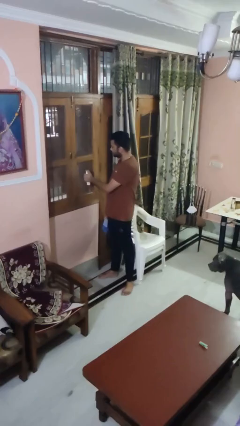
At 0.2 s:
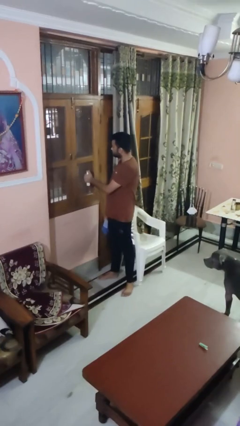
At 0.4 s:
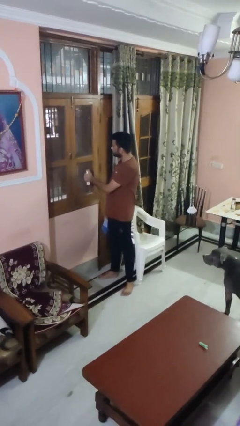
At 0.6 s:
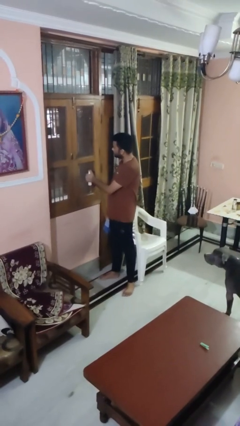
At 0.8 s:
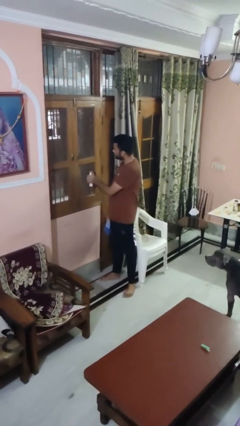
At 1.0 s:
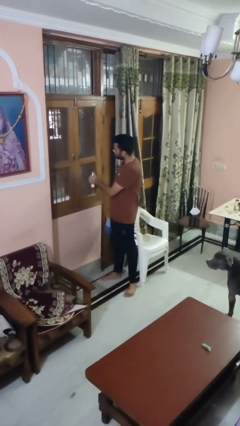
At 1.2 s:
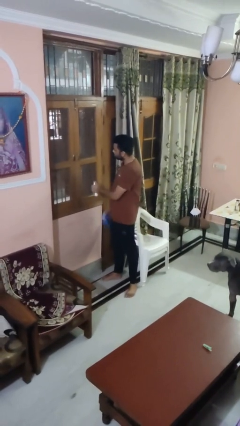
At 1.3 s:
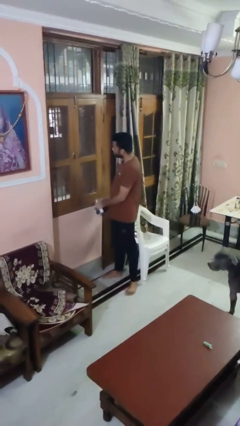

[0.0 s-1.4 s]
person sprays from bottle

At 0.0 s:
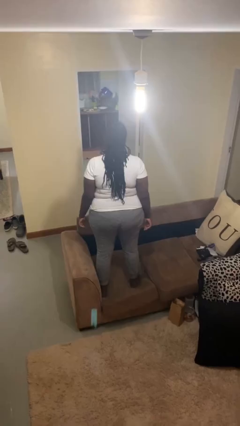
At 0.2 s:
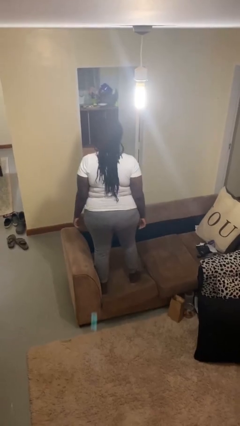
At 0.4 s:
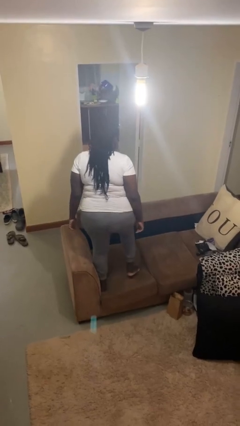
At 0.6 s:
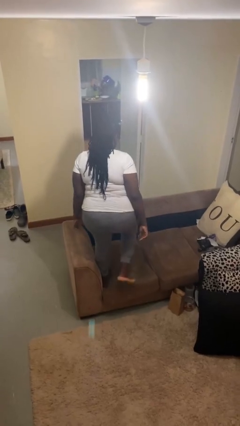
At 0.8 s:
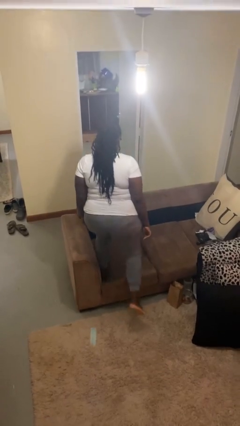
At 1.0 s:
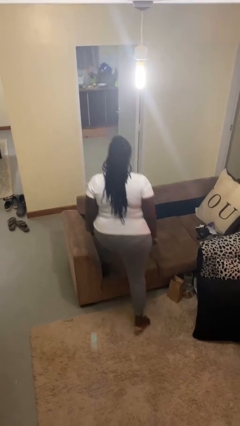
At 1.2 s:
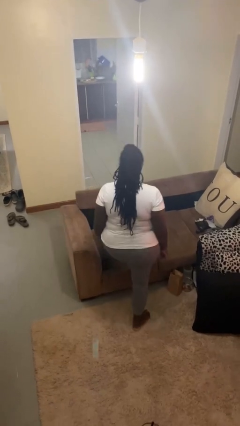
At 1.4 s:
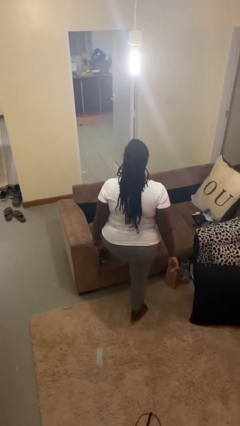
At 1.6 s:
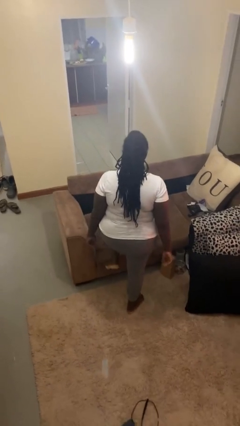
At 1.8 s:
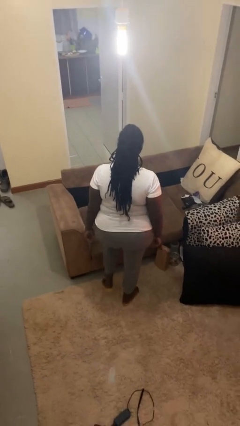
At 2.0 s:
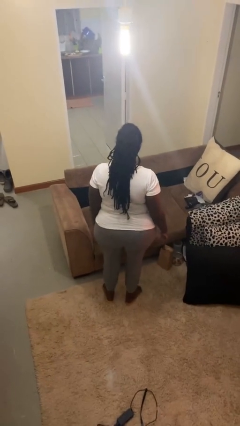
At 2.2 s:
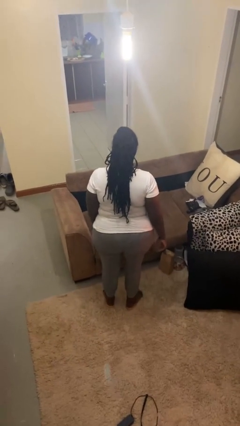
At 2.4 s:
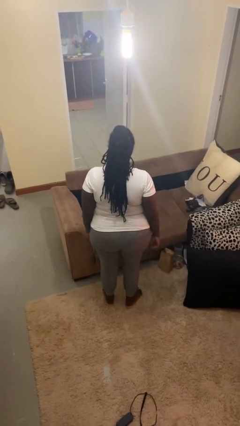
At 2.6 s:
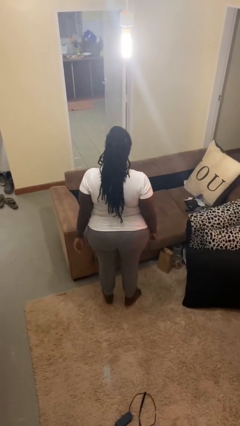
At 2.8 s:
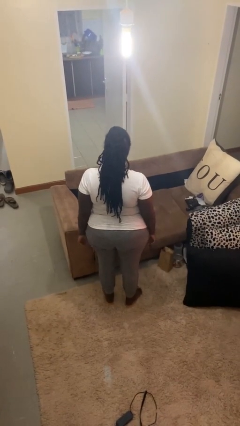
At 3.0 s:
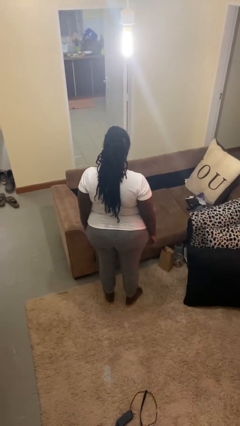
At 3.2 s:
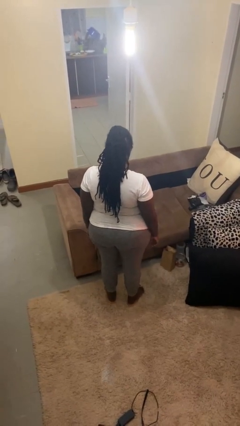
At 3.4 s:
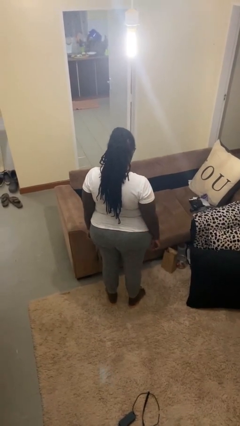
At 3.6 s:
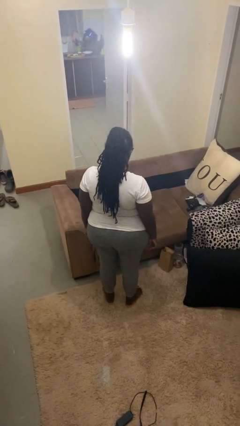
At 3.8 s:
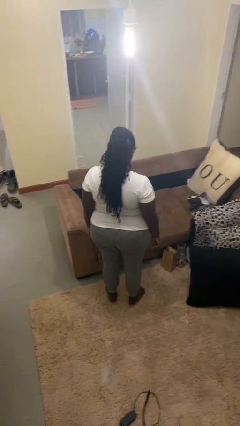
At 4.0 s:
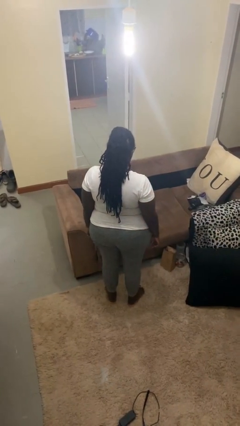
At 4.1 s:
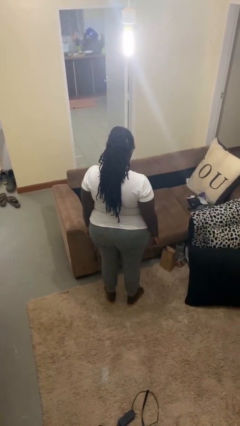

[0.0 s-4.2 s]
person climbs off couch

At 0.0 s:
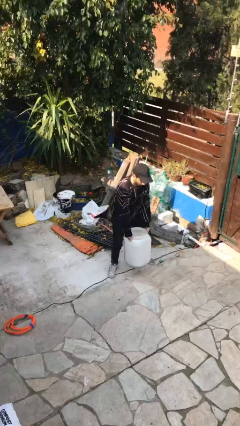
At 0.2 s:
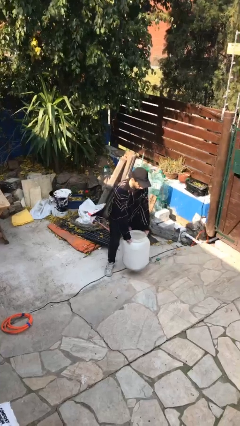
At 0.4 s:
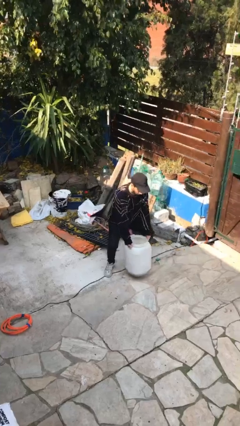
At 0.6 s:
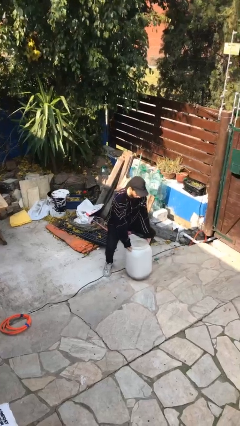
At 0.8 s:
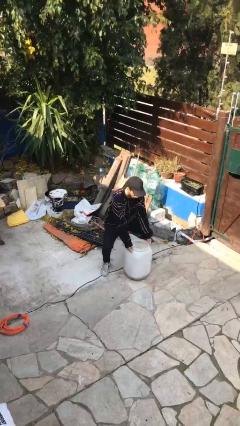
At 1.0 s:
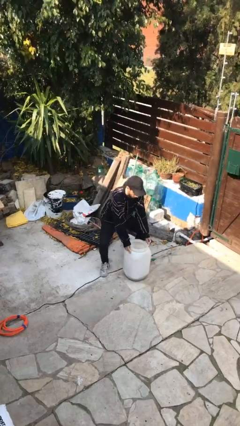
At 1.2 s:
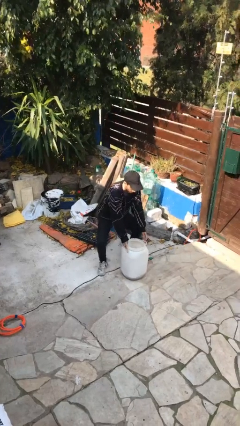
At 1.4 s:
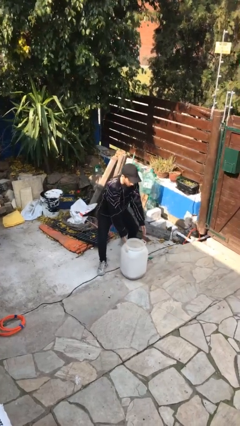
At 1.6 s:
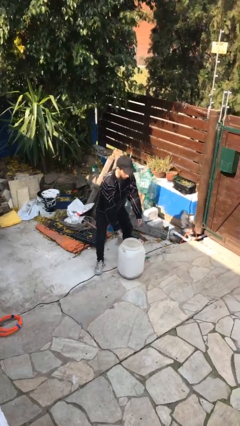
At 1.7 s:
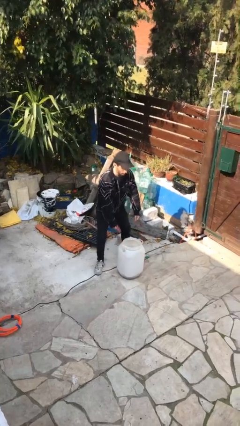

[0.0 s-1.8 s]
person puts down object on floor

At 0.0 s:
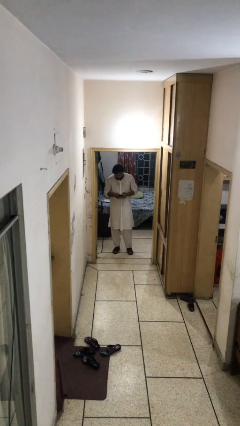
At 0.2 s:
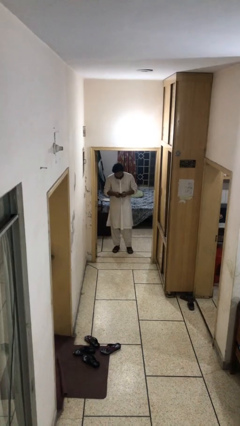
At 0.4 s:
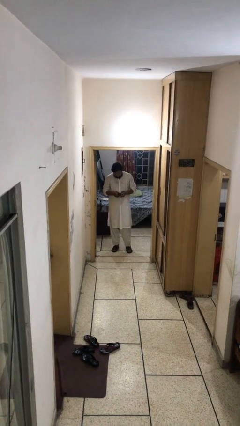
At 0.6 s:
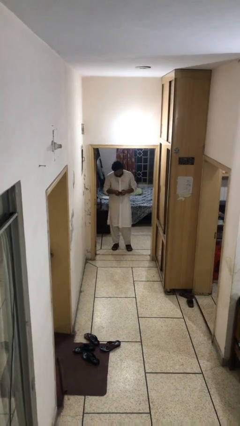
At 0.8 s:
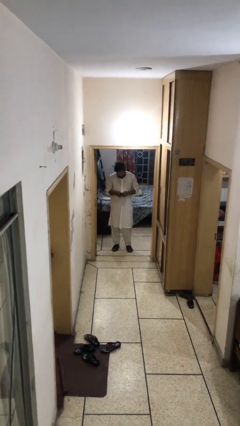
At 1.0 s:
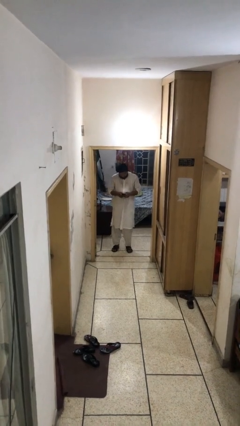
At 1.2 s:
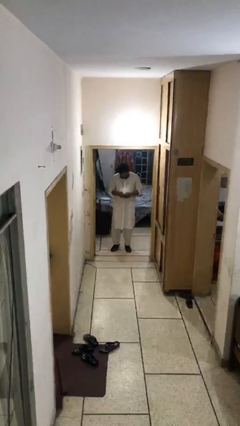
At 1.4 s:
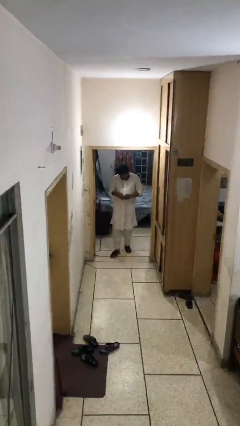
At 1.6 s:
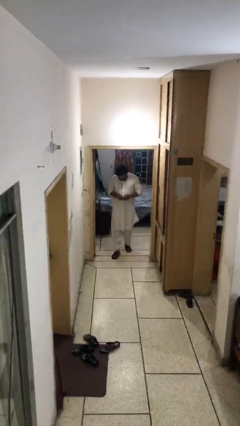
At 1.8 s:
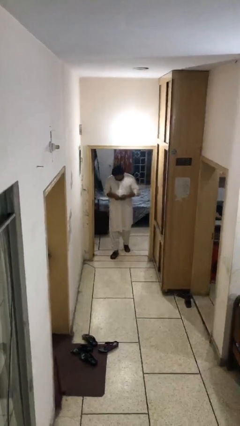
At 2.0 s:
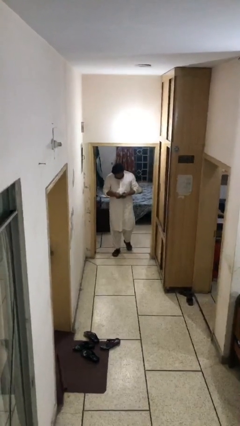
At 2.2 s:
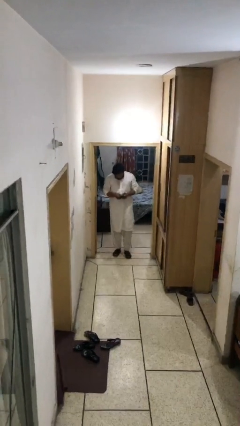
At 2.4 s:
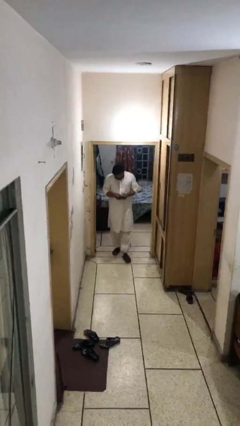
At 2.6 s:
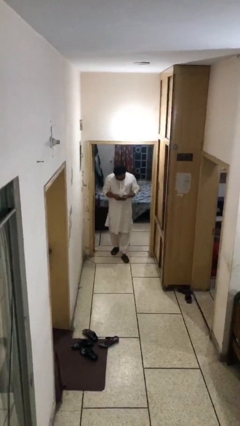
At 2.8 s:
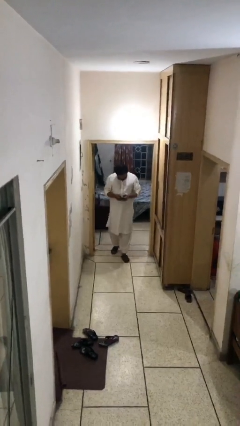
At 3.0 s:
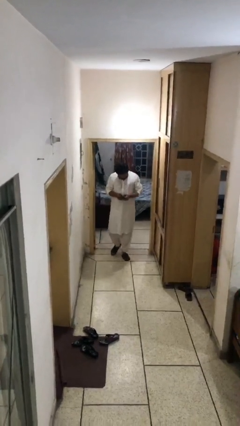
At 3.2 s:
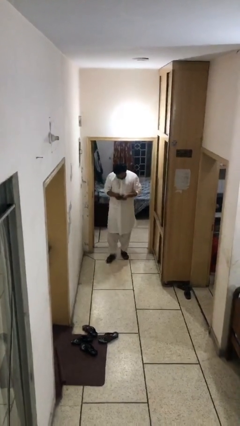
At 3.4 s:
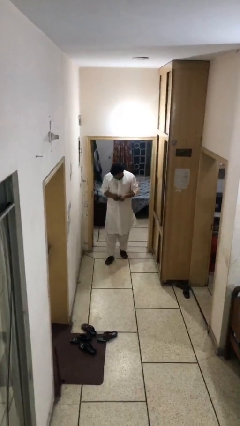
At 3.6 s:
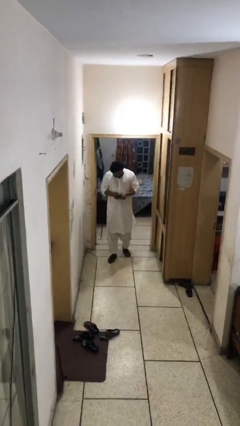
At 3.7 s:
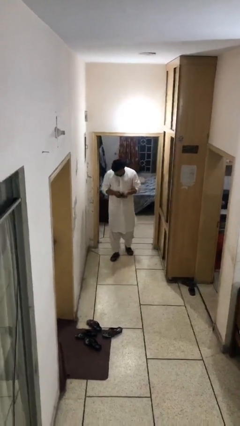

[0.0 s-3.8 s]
person texts on phone

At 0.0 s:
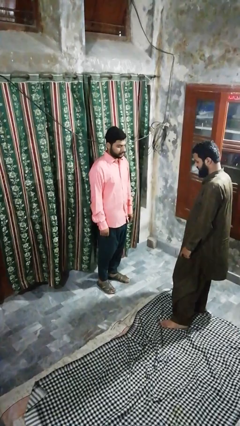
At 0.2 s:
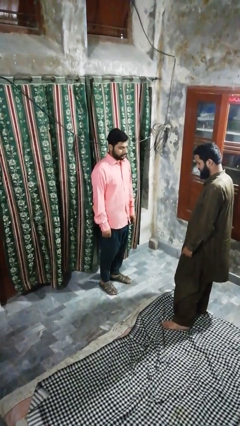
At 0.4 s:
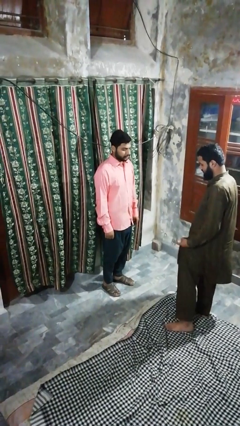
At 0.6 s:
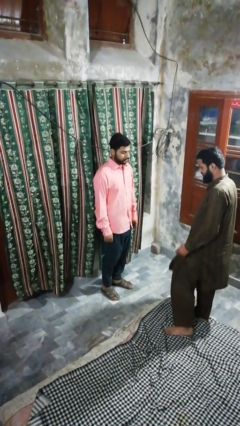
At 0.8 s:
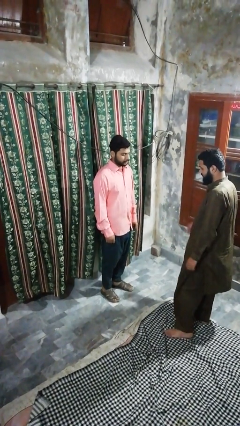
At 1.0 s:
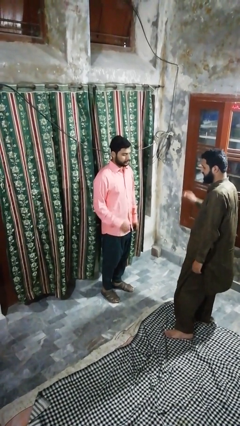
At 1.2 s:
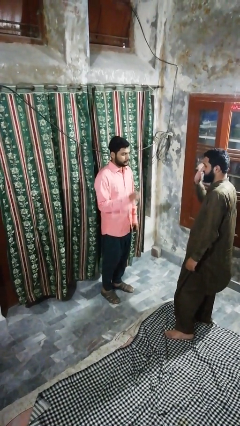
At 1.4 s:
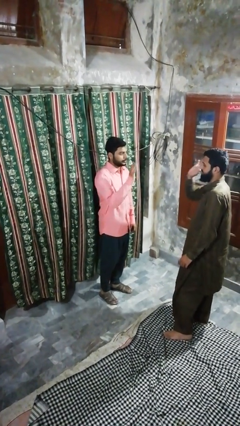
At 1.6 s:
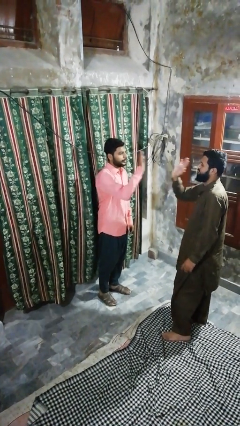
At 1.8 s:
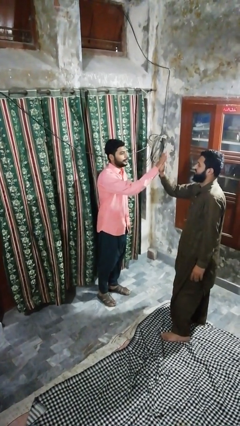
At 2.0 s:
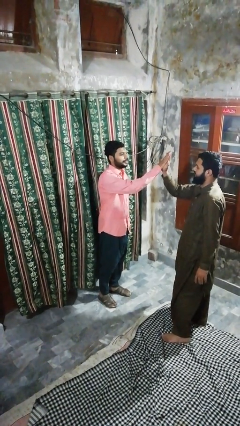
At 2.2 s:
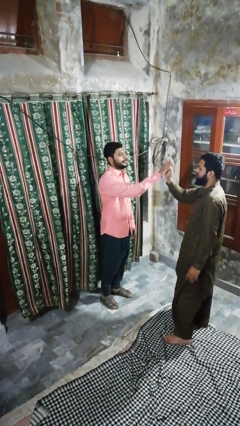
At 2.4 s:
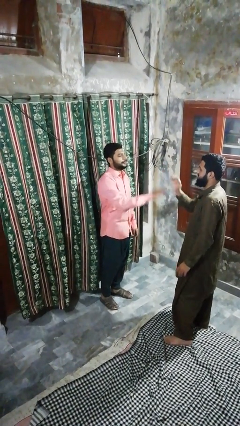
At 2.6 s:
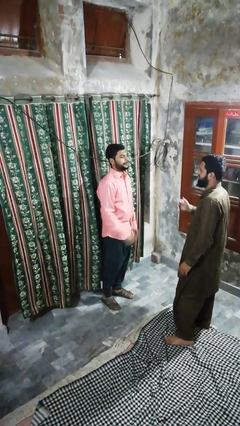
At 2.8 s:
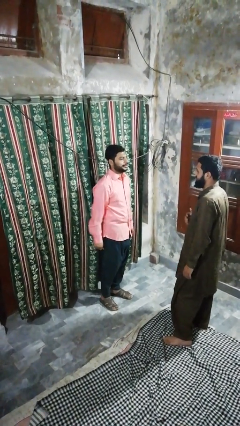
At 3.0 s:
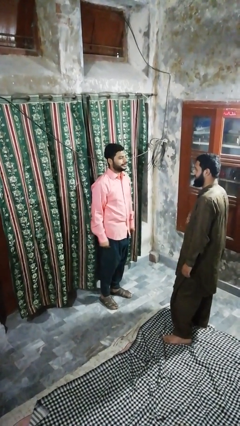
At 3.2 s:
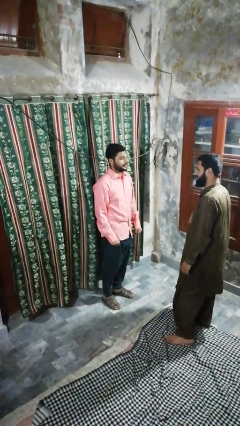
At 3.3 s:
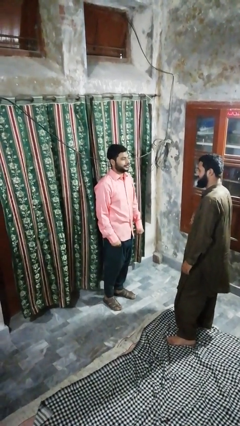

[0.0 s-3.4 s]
person highfives hand

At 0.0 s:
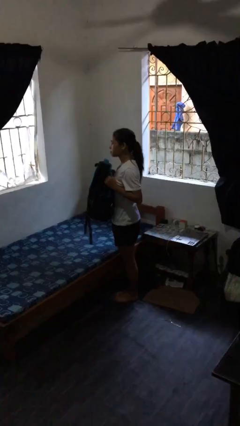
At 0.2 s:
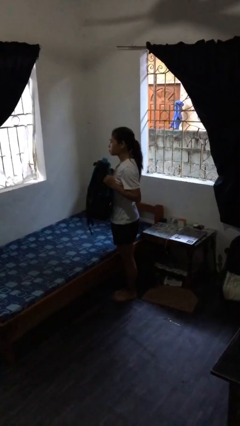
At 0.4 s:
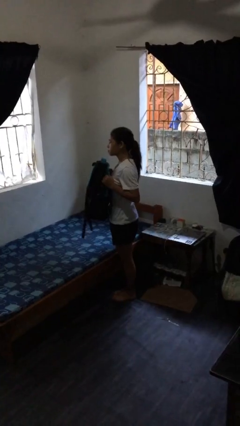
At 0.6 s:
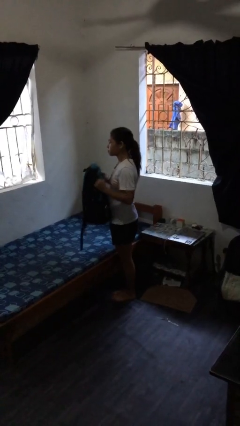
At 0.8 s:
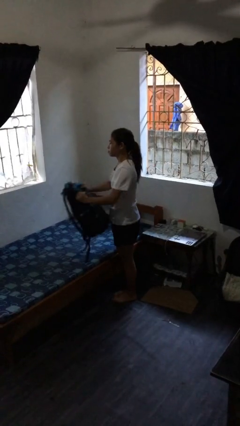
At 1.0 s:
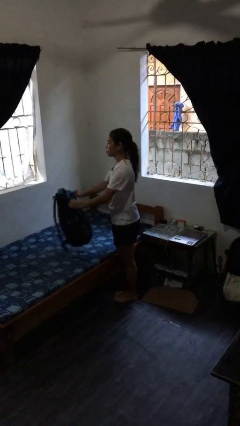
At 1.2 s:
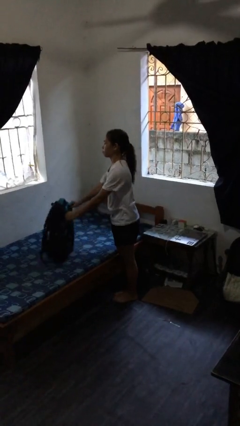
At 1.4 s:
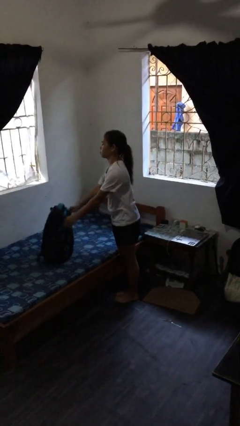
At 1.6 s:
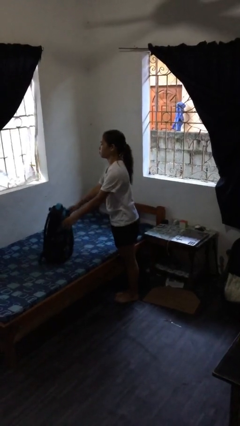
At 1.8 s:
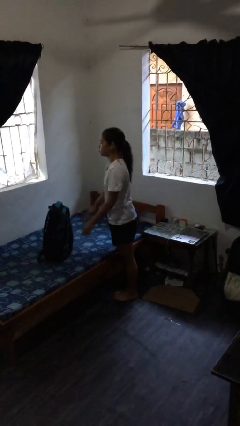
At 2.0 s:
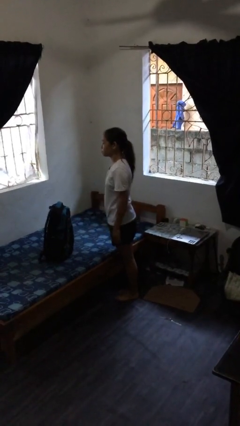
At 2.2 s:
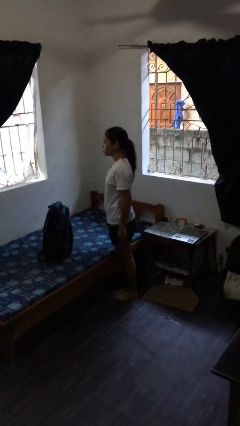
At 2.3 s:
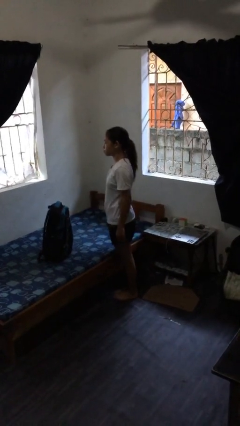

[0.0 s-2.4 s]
person puts down object on bed

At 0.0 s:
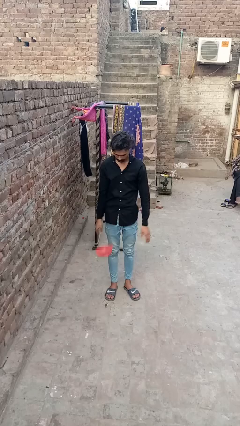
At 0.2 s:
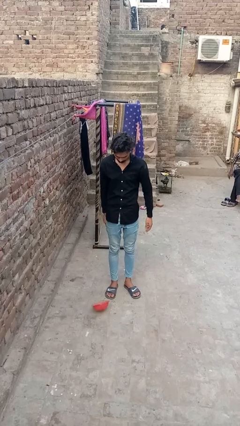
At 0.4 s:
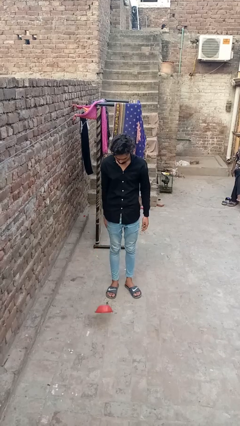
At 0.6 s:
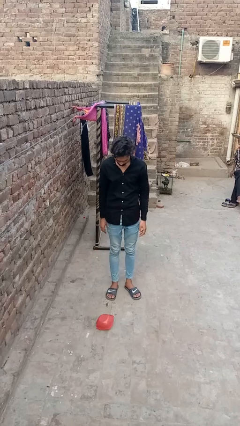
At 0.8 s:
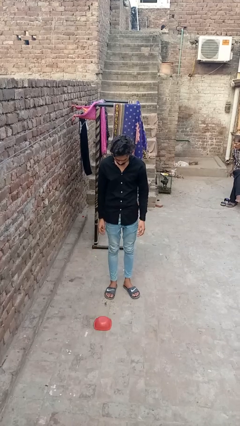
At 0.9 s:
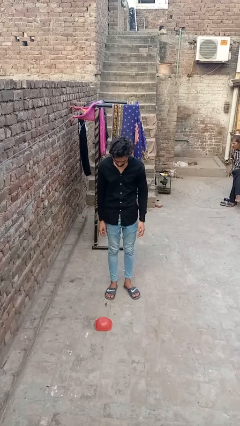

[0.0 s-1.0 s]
person catches dropped object
